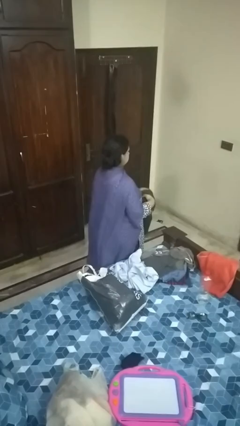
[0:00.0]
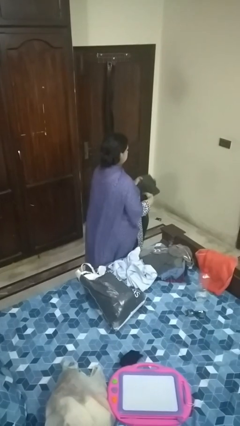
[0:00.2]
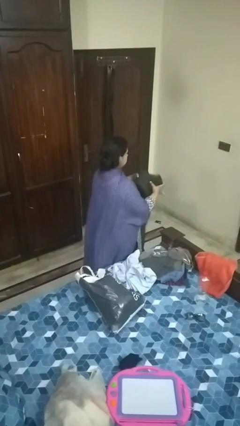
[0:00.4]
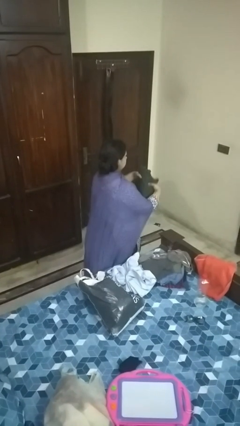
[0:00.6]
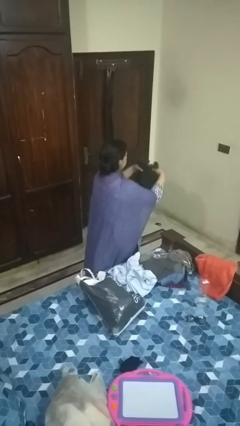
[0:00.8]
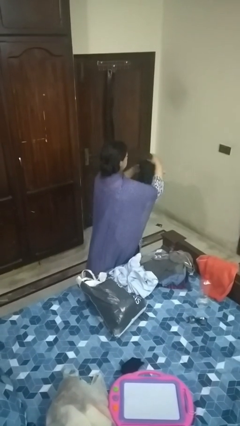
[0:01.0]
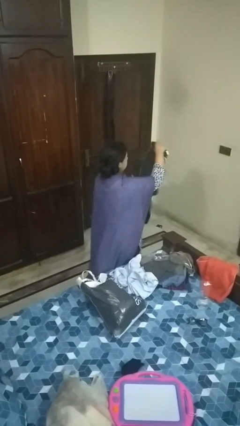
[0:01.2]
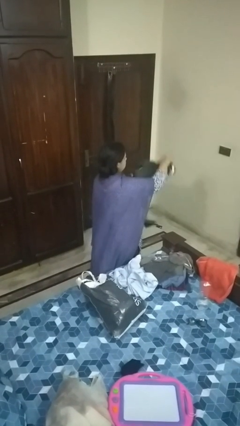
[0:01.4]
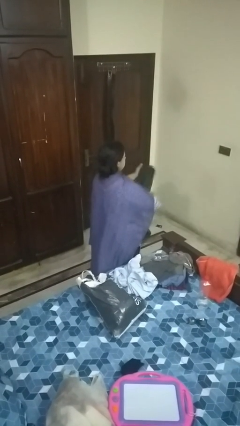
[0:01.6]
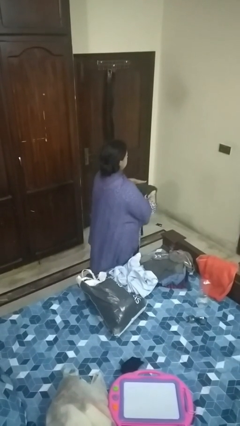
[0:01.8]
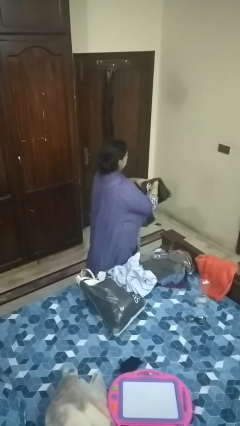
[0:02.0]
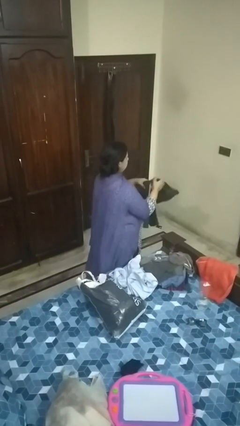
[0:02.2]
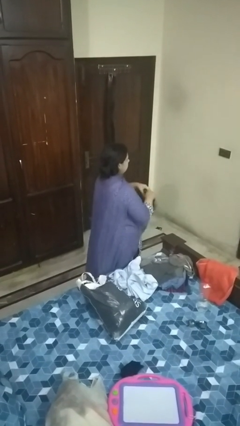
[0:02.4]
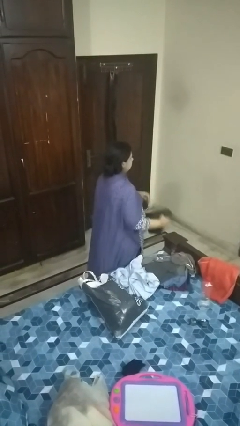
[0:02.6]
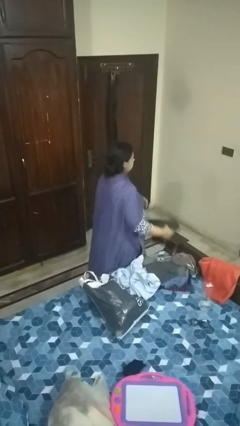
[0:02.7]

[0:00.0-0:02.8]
person folds pants

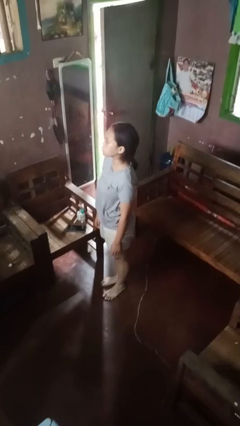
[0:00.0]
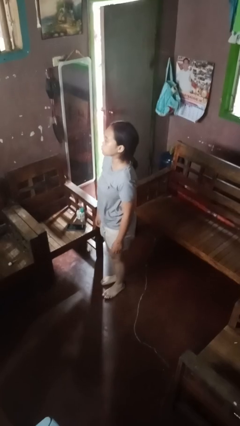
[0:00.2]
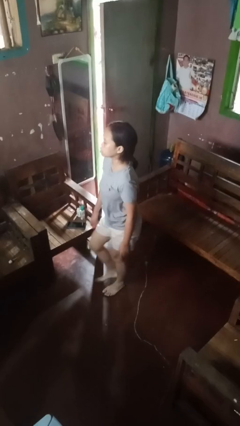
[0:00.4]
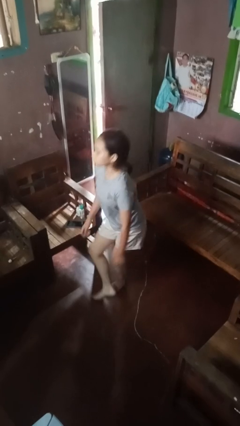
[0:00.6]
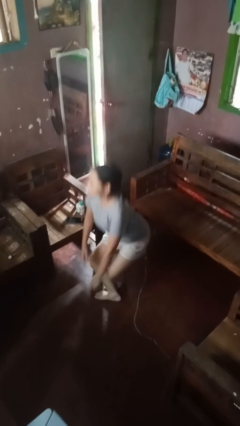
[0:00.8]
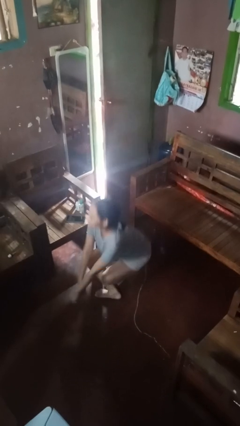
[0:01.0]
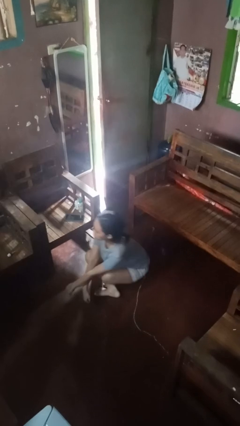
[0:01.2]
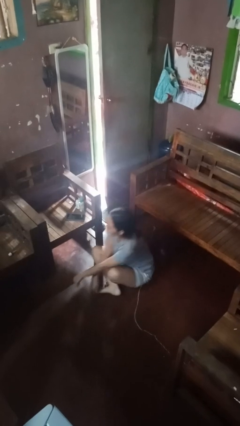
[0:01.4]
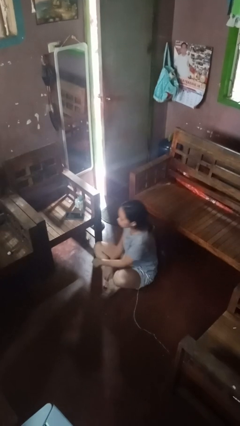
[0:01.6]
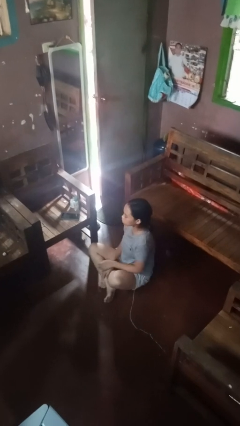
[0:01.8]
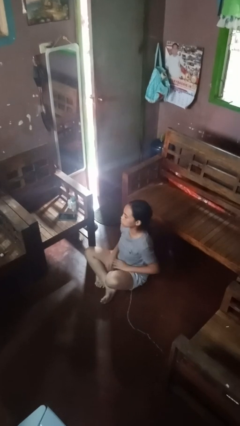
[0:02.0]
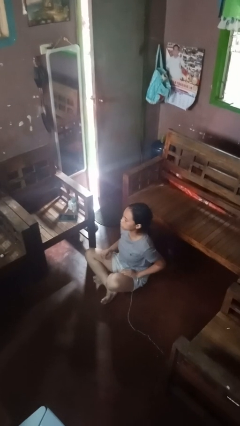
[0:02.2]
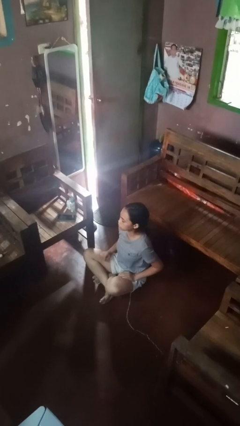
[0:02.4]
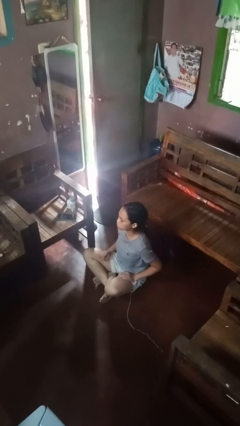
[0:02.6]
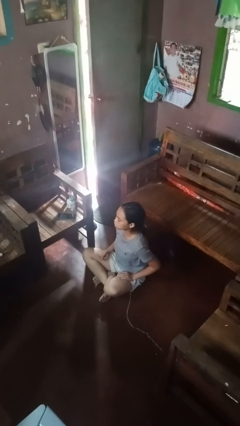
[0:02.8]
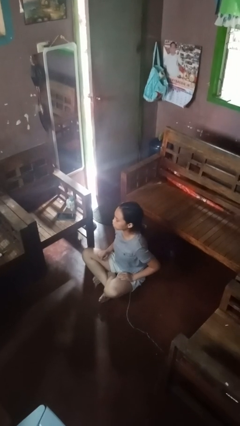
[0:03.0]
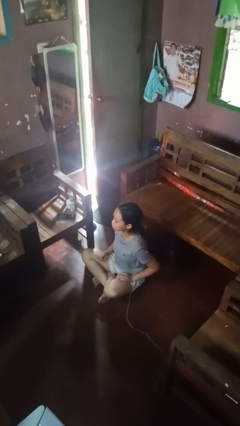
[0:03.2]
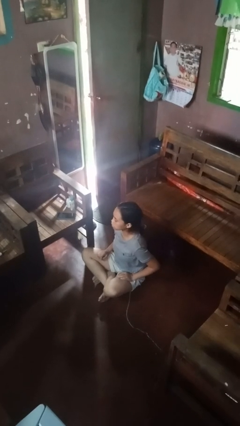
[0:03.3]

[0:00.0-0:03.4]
person sits crisscross

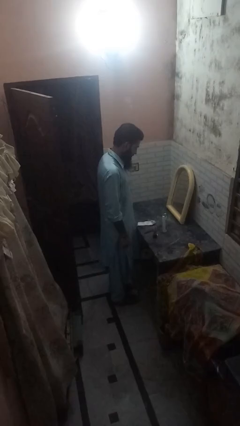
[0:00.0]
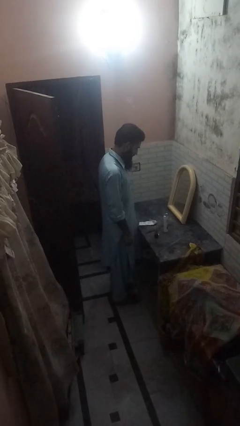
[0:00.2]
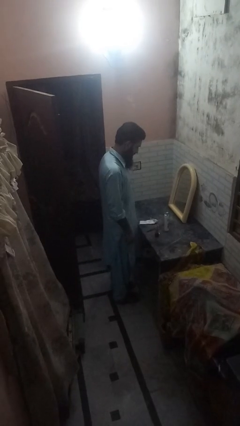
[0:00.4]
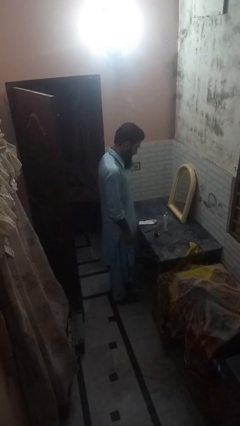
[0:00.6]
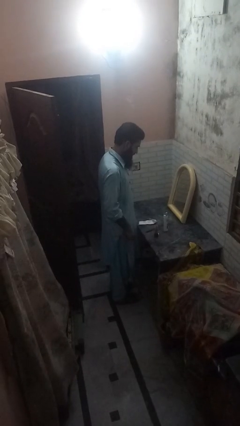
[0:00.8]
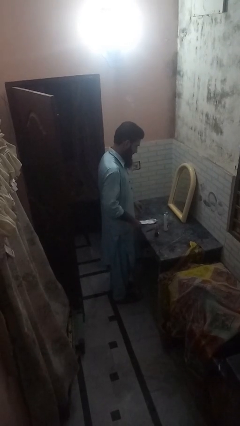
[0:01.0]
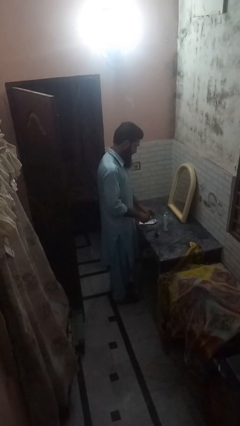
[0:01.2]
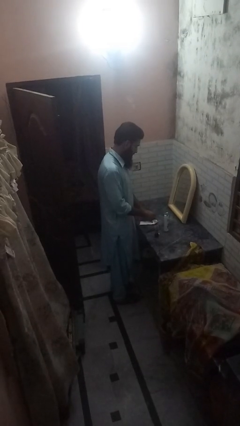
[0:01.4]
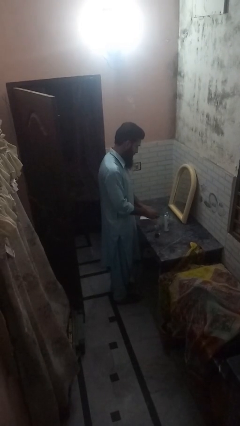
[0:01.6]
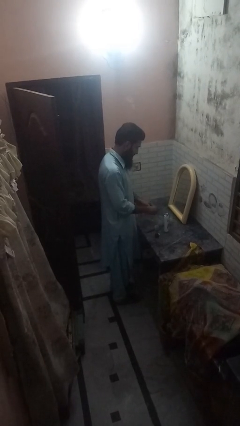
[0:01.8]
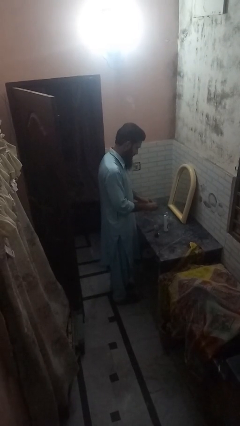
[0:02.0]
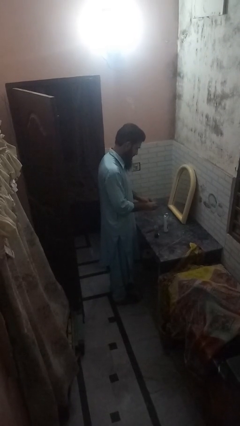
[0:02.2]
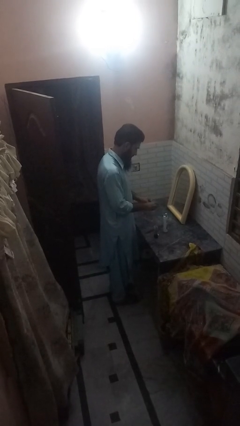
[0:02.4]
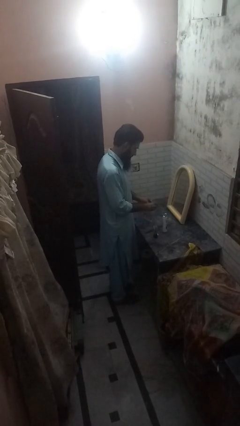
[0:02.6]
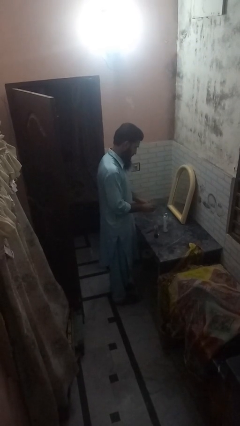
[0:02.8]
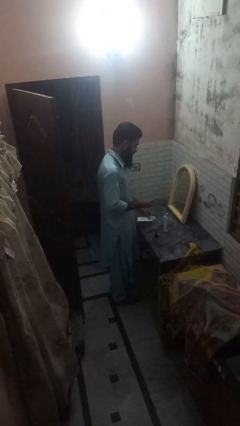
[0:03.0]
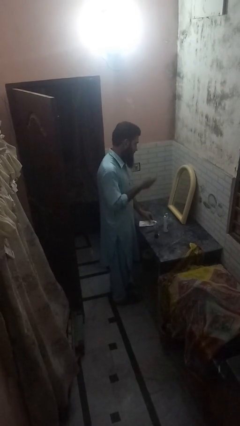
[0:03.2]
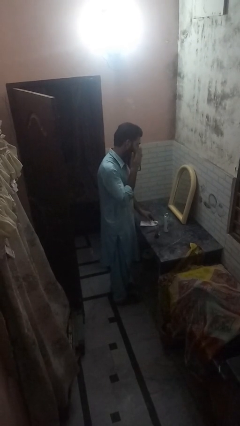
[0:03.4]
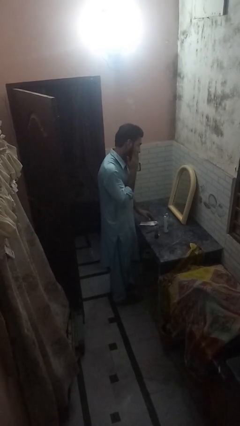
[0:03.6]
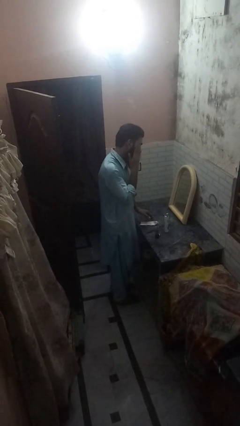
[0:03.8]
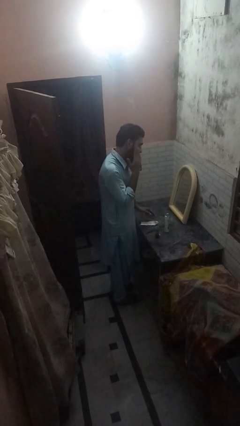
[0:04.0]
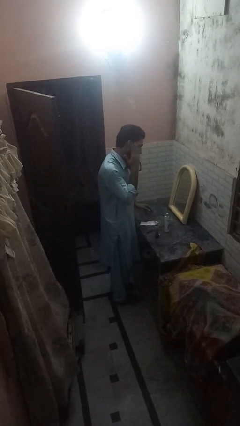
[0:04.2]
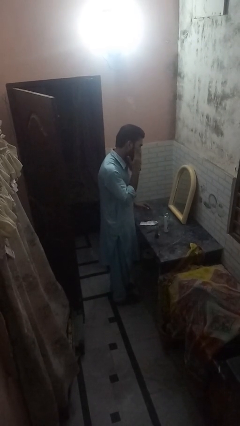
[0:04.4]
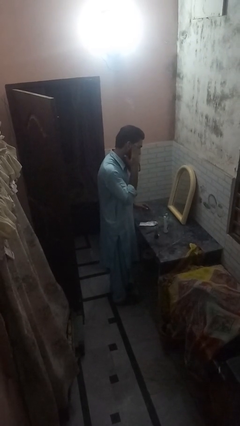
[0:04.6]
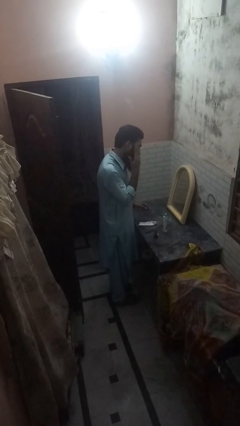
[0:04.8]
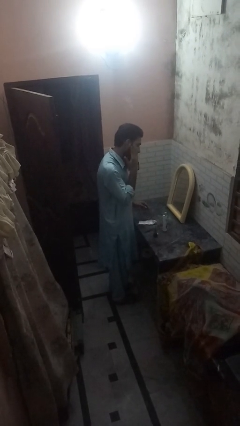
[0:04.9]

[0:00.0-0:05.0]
person applies shaving cream

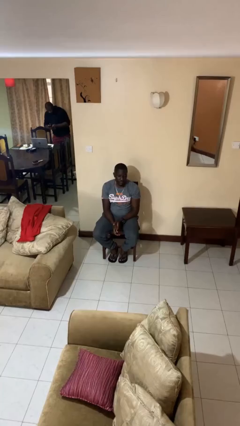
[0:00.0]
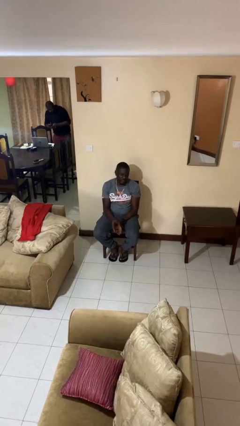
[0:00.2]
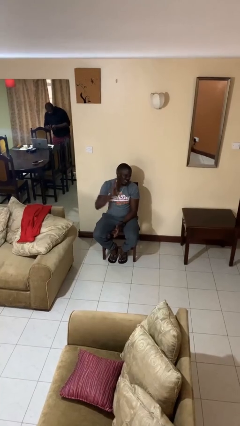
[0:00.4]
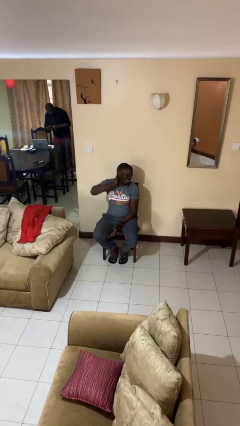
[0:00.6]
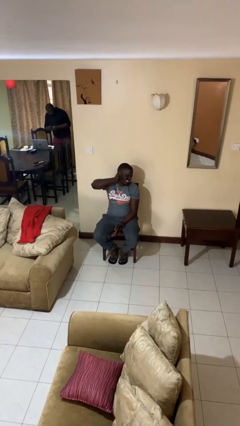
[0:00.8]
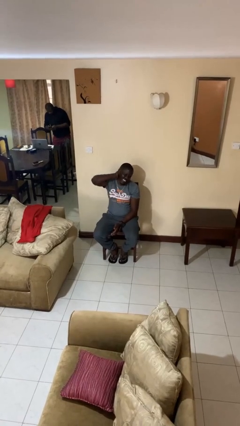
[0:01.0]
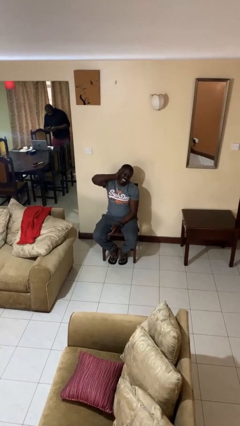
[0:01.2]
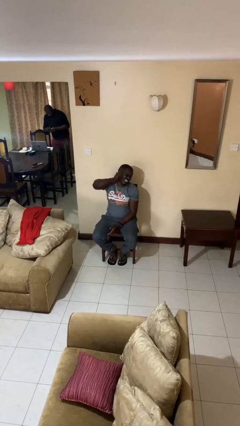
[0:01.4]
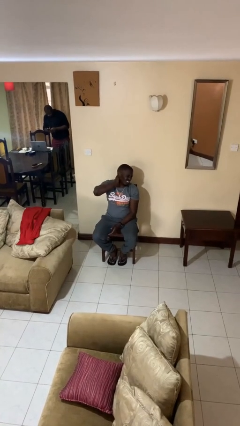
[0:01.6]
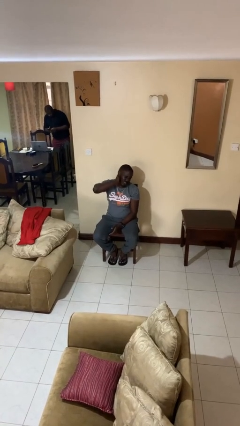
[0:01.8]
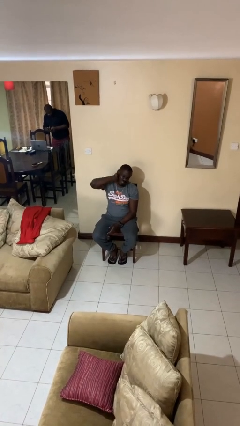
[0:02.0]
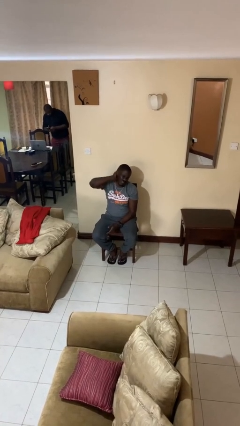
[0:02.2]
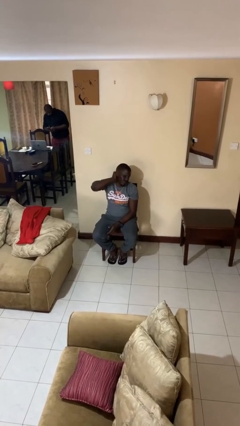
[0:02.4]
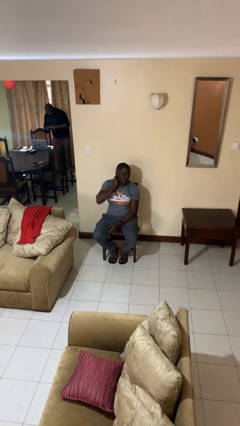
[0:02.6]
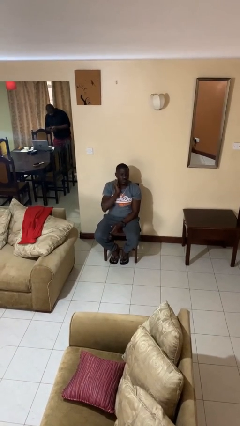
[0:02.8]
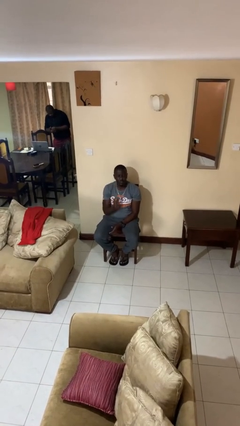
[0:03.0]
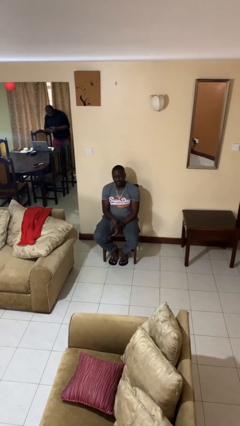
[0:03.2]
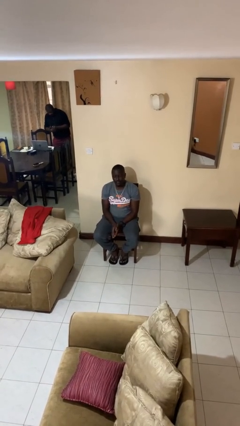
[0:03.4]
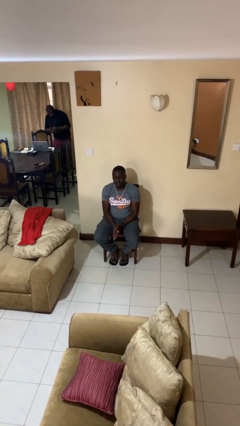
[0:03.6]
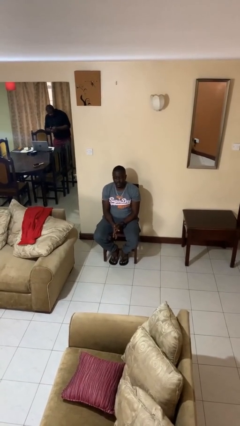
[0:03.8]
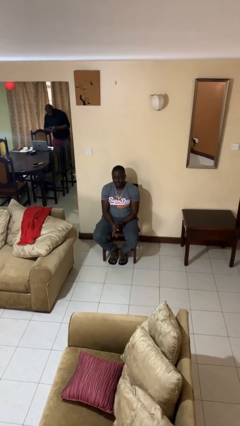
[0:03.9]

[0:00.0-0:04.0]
person rubs neck

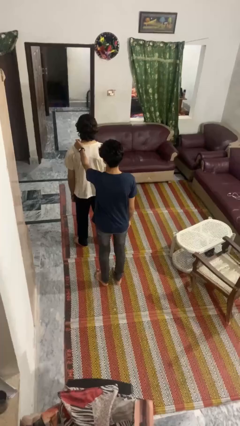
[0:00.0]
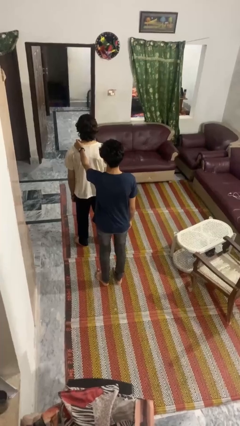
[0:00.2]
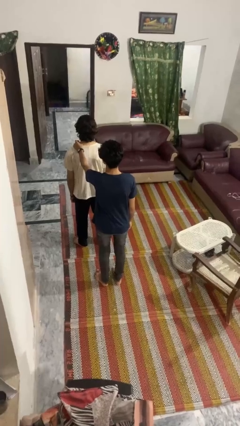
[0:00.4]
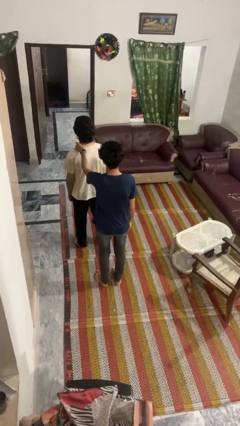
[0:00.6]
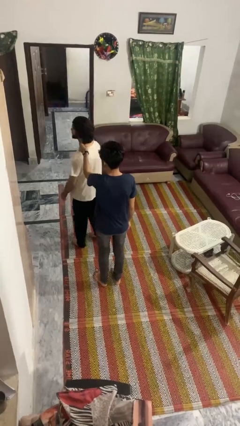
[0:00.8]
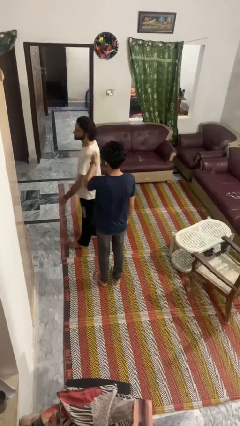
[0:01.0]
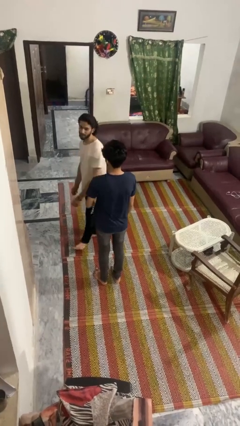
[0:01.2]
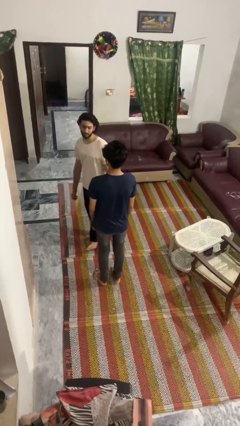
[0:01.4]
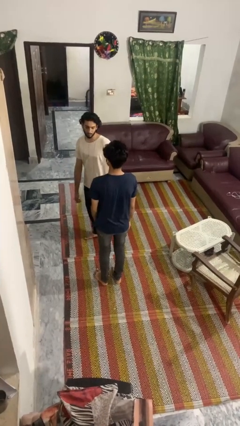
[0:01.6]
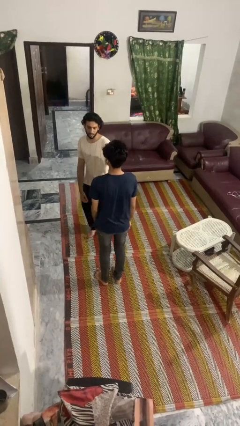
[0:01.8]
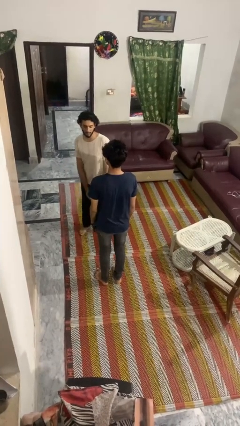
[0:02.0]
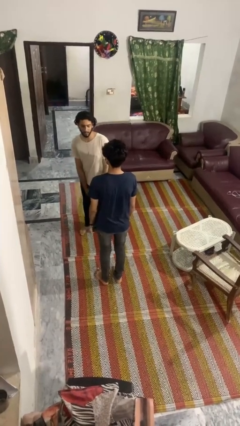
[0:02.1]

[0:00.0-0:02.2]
person spins person around
